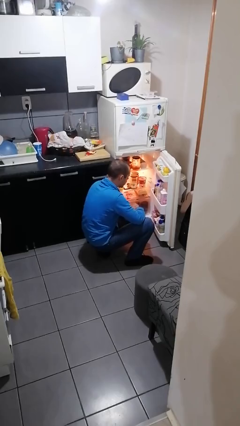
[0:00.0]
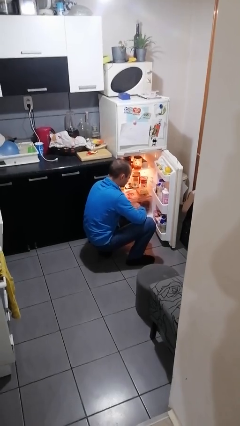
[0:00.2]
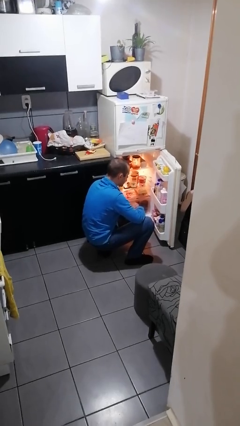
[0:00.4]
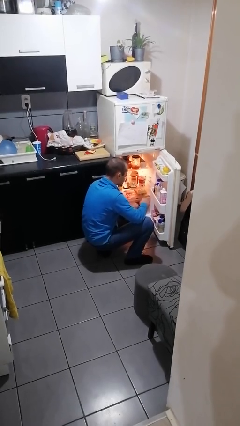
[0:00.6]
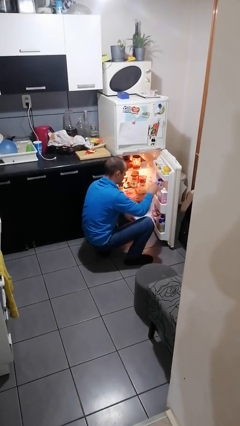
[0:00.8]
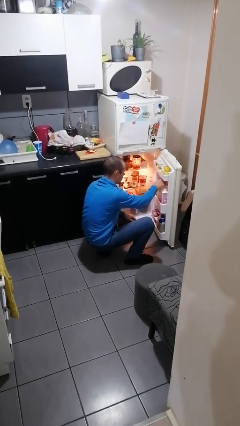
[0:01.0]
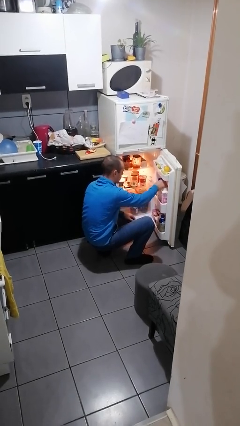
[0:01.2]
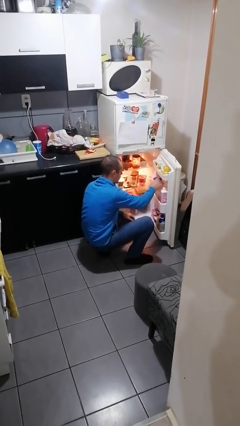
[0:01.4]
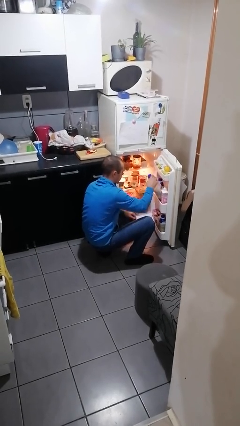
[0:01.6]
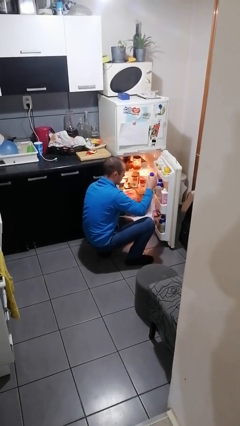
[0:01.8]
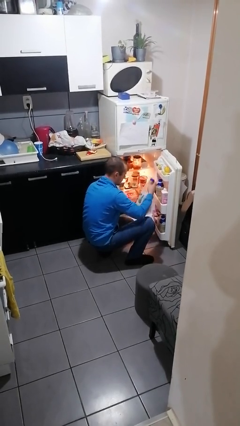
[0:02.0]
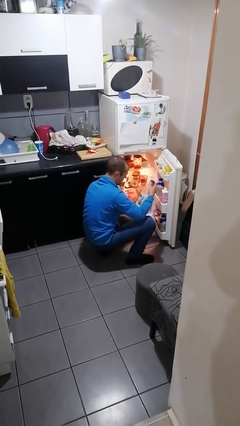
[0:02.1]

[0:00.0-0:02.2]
person takes object from refrigerator

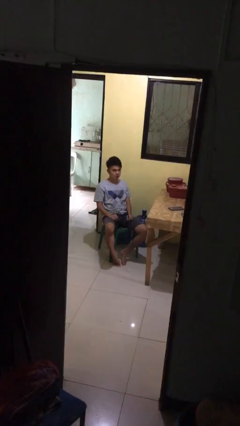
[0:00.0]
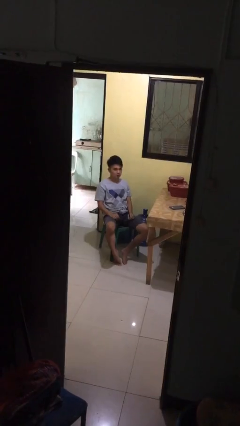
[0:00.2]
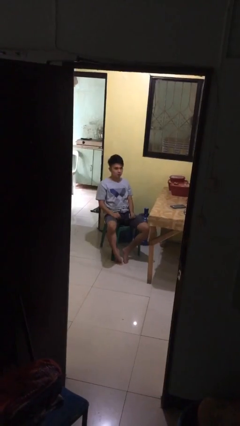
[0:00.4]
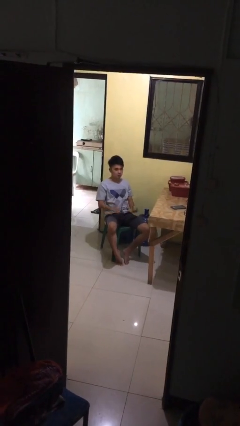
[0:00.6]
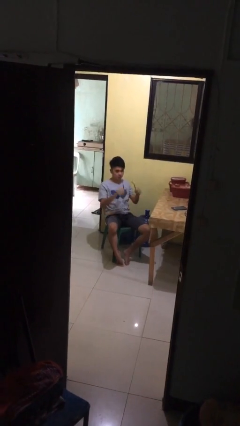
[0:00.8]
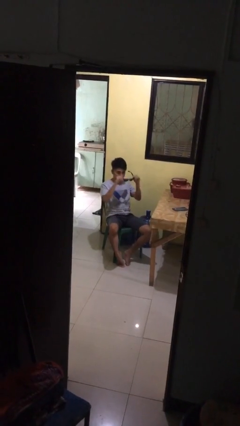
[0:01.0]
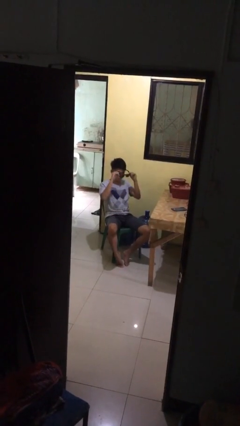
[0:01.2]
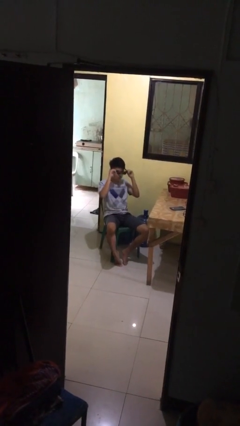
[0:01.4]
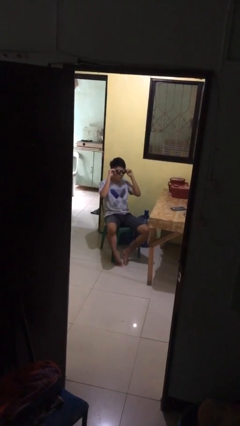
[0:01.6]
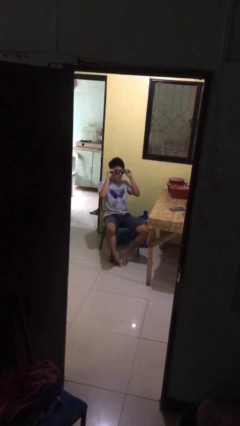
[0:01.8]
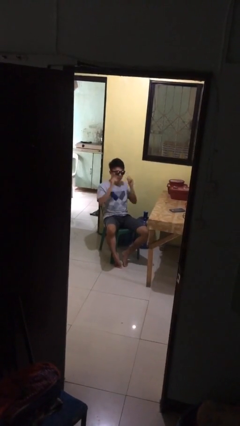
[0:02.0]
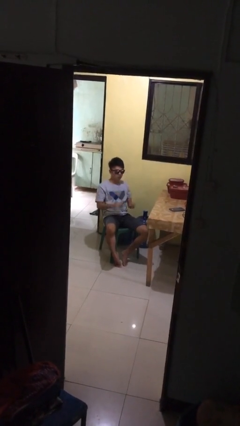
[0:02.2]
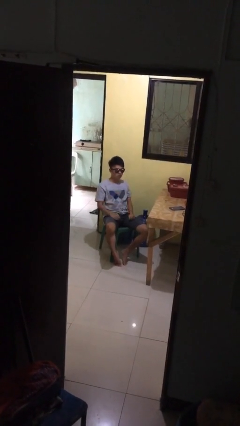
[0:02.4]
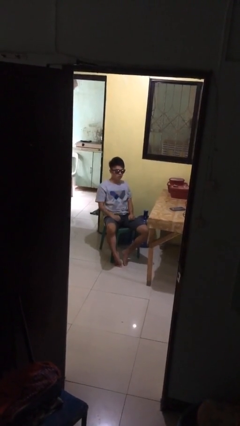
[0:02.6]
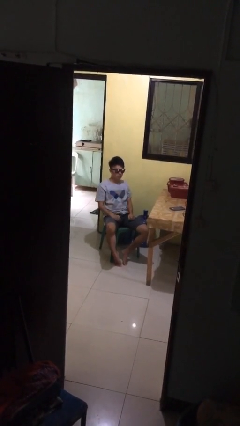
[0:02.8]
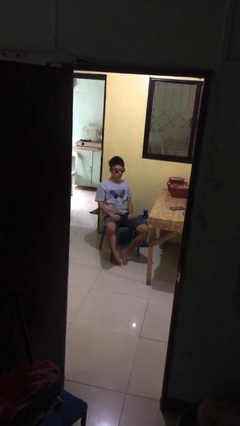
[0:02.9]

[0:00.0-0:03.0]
person puts on sunglasses

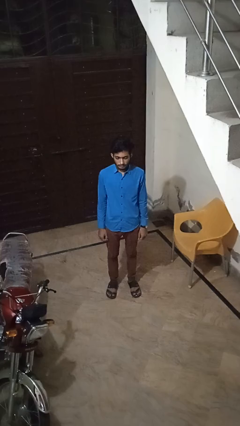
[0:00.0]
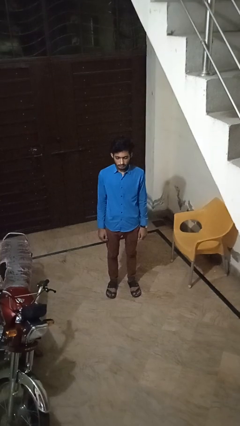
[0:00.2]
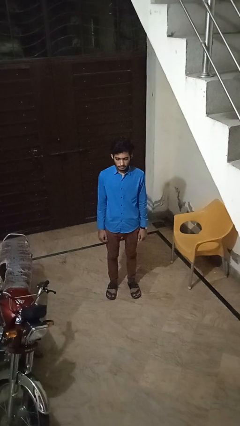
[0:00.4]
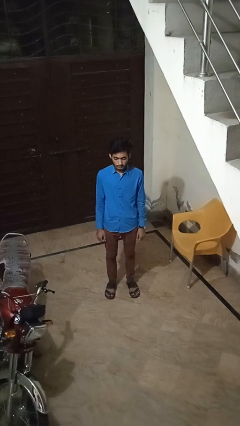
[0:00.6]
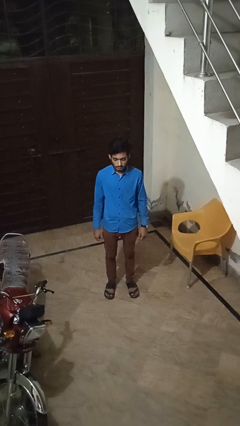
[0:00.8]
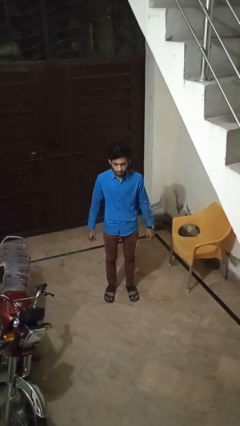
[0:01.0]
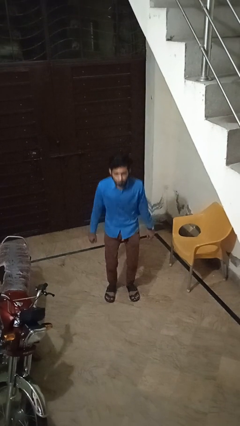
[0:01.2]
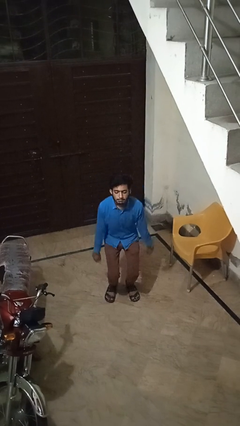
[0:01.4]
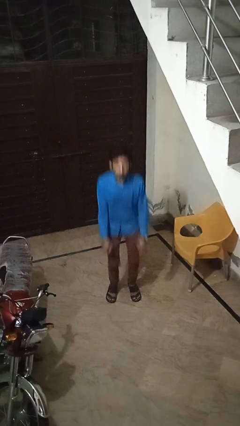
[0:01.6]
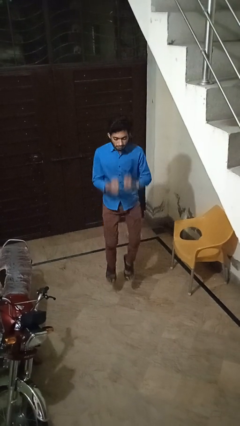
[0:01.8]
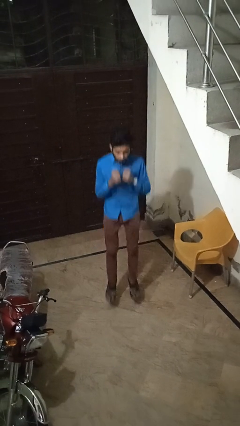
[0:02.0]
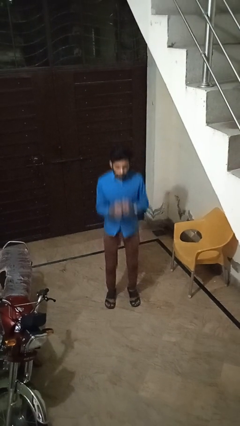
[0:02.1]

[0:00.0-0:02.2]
person jumps

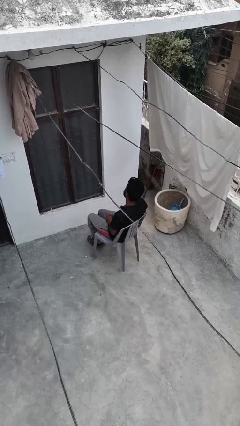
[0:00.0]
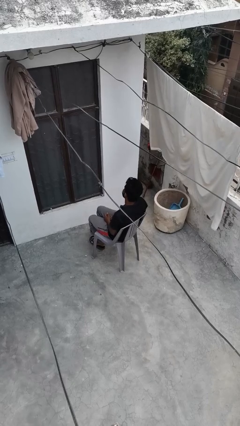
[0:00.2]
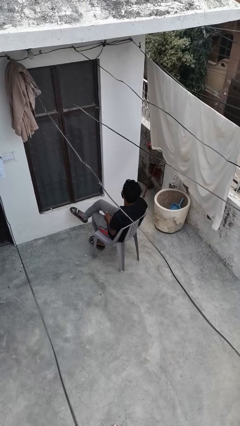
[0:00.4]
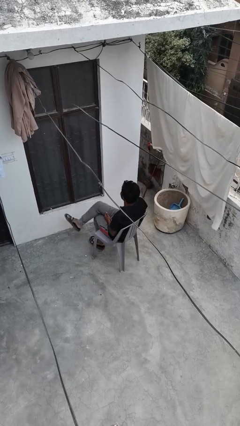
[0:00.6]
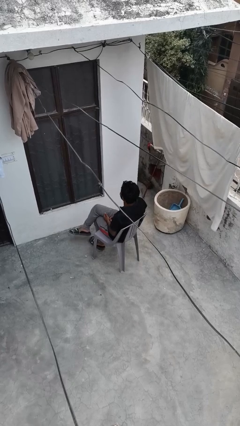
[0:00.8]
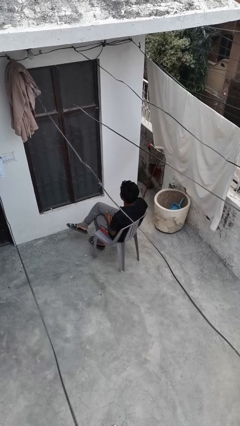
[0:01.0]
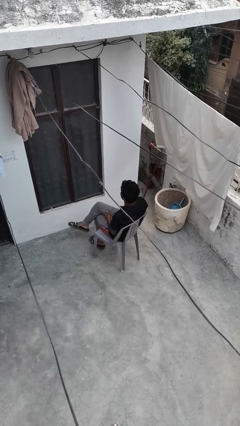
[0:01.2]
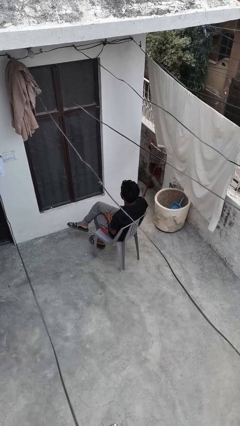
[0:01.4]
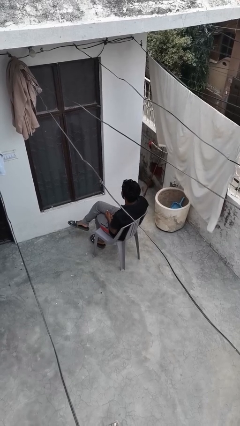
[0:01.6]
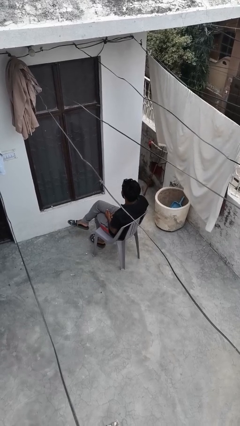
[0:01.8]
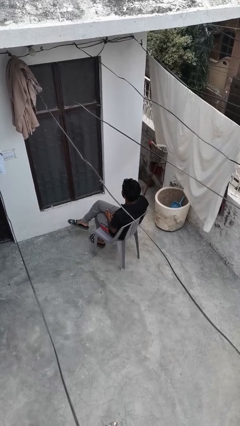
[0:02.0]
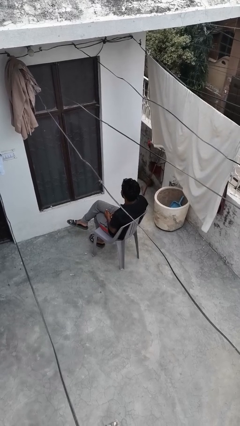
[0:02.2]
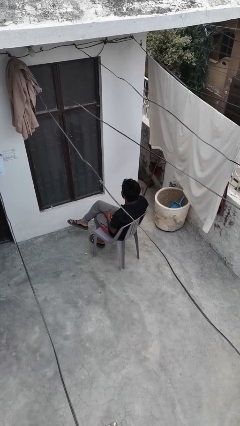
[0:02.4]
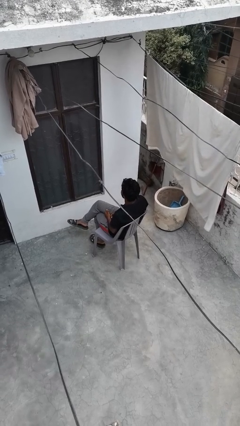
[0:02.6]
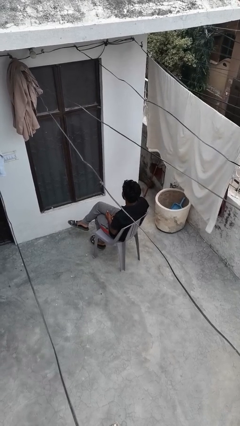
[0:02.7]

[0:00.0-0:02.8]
person crosses legs

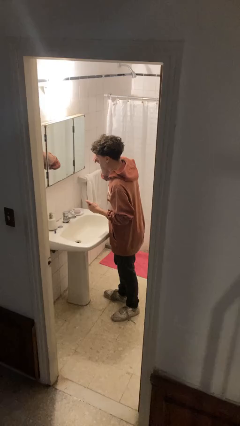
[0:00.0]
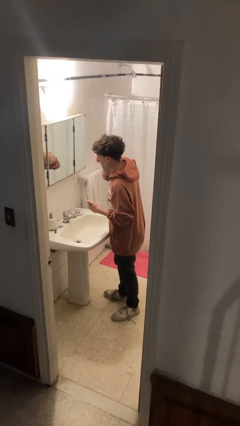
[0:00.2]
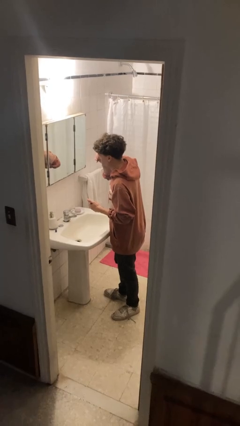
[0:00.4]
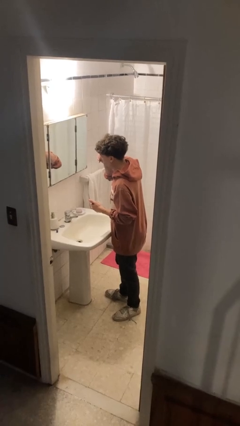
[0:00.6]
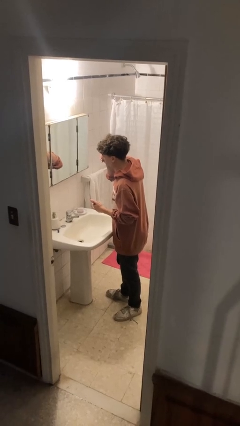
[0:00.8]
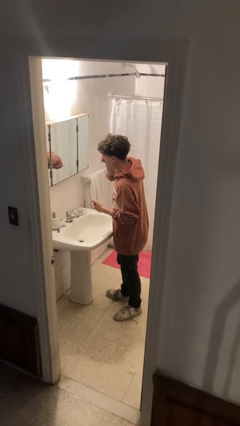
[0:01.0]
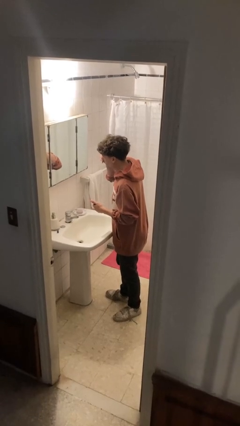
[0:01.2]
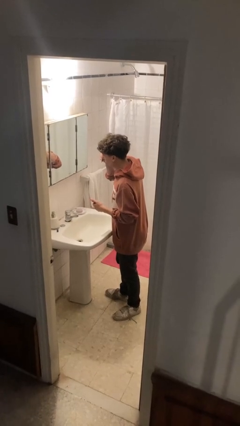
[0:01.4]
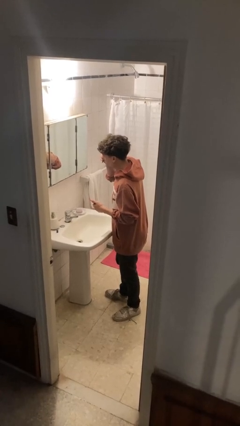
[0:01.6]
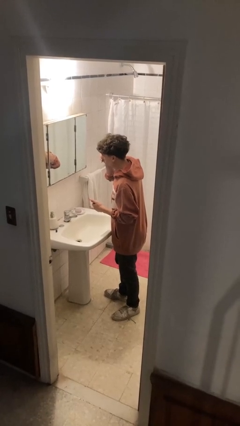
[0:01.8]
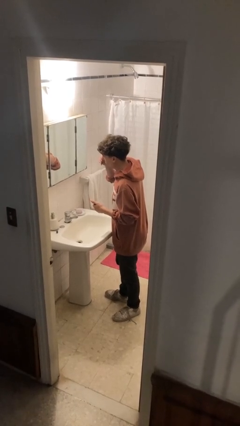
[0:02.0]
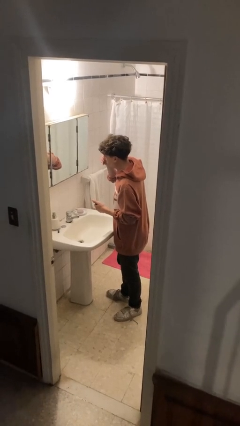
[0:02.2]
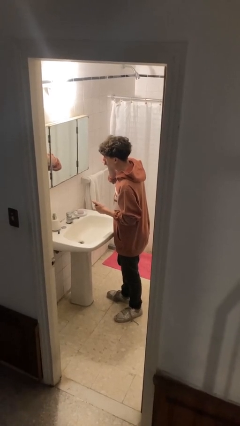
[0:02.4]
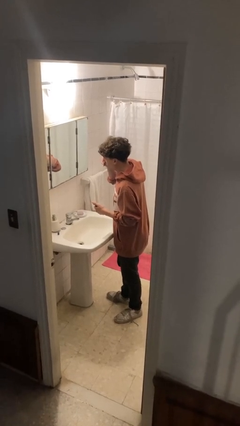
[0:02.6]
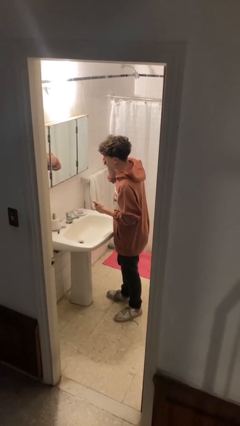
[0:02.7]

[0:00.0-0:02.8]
person applies lip makeup

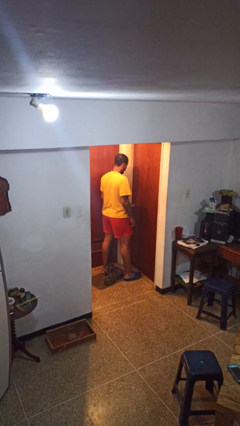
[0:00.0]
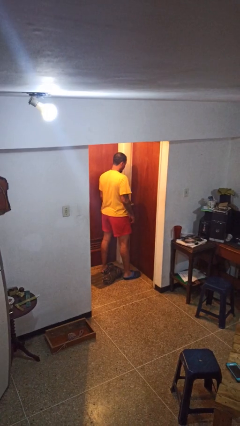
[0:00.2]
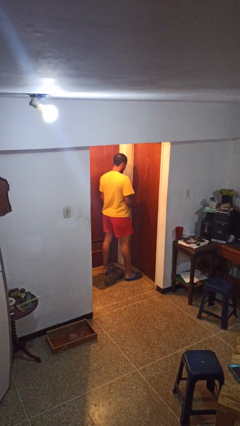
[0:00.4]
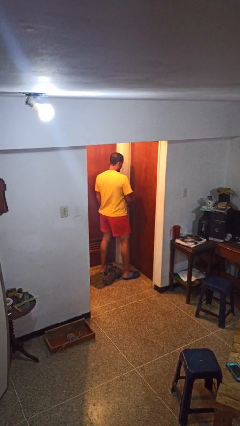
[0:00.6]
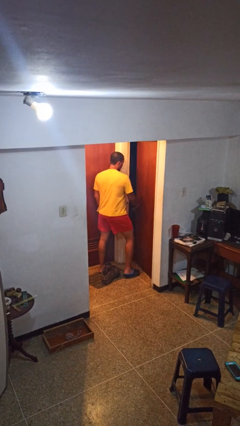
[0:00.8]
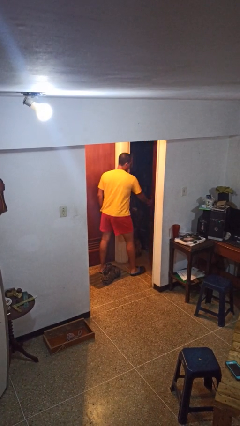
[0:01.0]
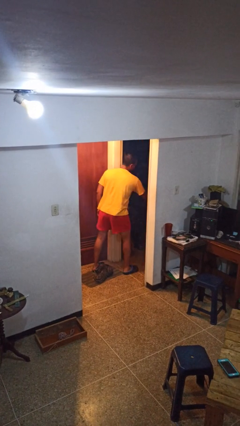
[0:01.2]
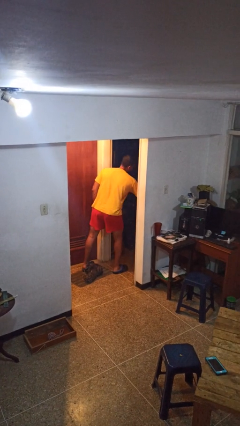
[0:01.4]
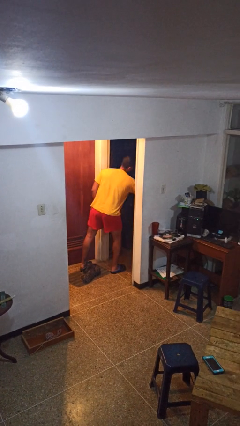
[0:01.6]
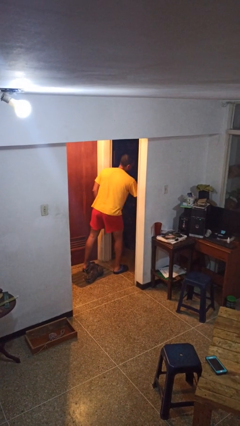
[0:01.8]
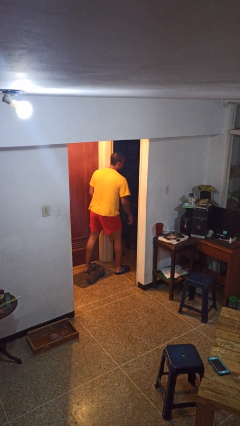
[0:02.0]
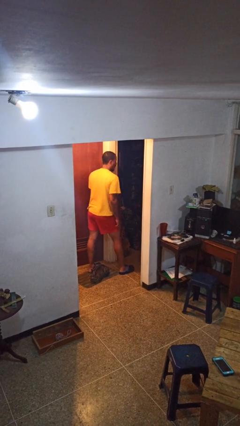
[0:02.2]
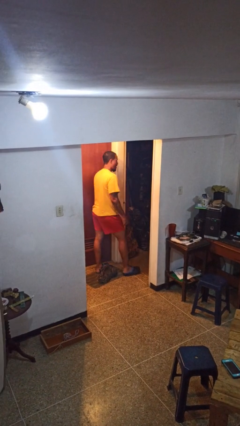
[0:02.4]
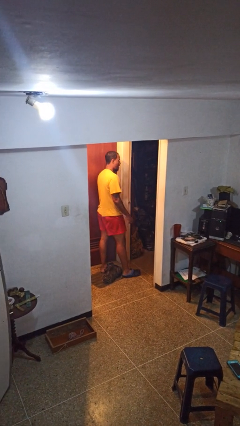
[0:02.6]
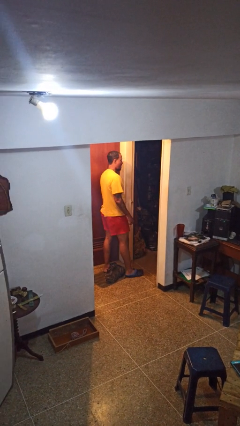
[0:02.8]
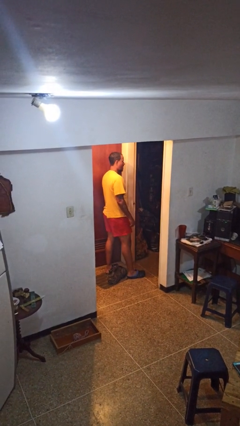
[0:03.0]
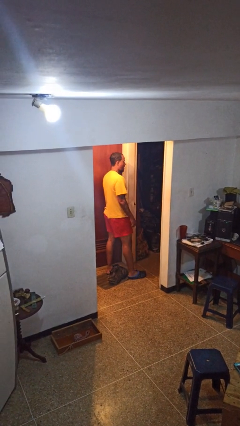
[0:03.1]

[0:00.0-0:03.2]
person opens facility door

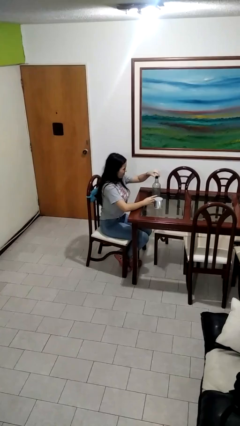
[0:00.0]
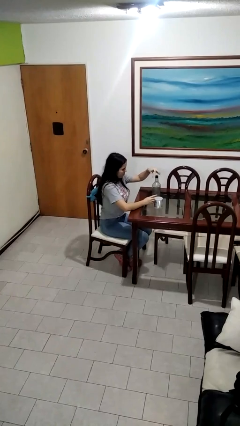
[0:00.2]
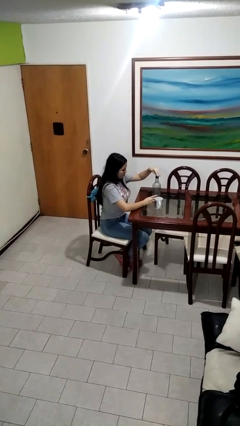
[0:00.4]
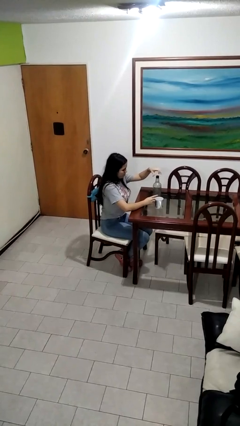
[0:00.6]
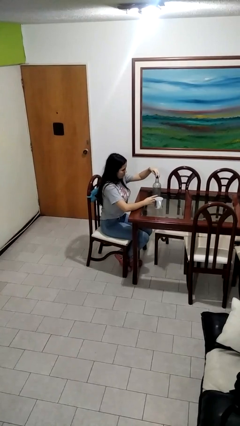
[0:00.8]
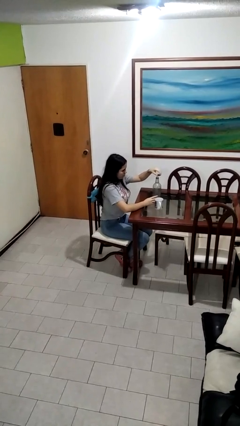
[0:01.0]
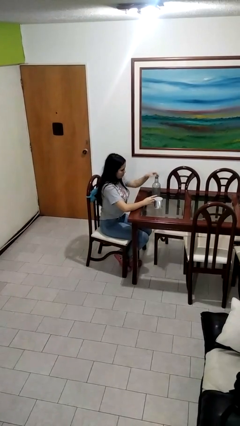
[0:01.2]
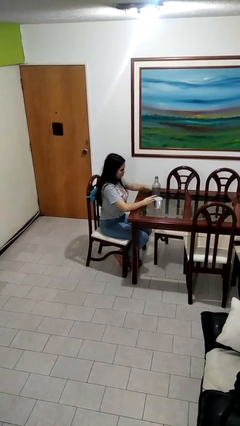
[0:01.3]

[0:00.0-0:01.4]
person unscrews lid from bottle
